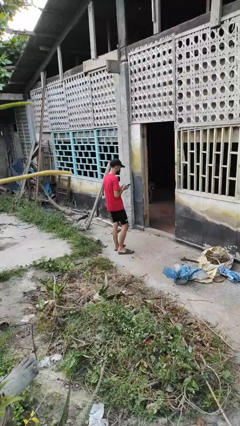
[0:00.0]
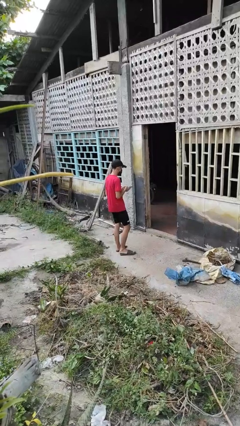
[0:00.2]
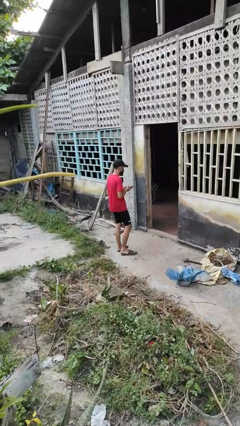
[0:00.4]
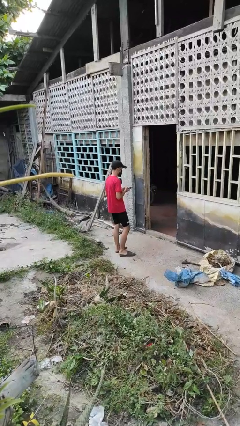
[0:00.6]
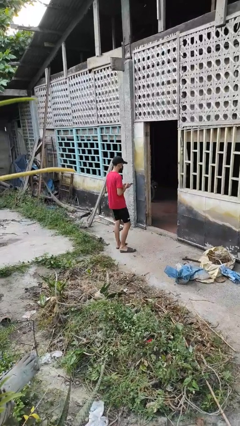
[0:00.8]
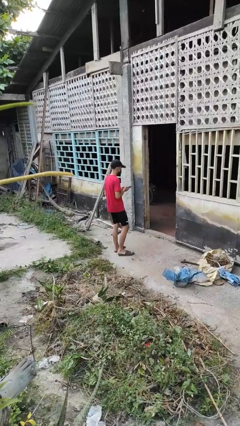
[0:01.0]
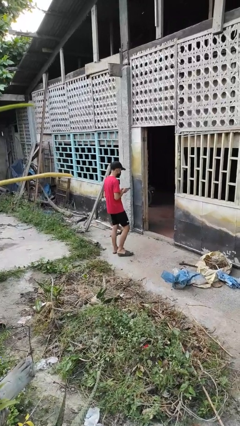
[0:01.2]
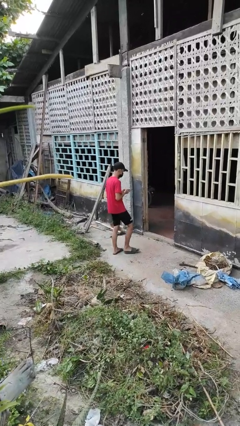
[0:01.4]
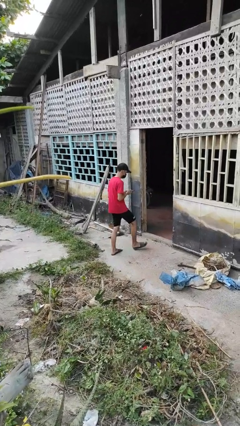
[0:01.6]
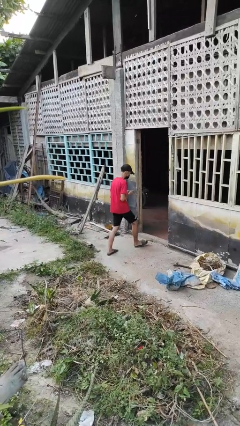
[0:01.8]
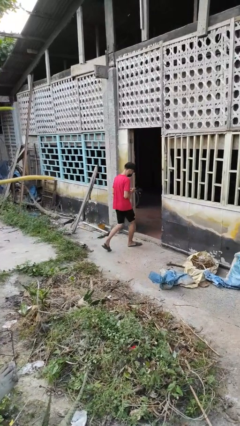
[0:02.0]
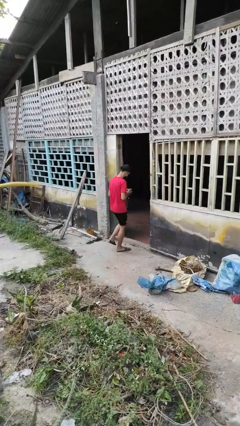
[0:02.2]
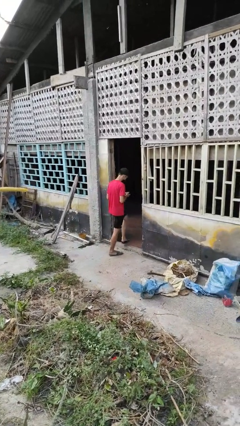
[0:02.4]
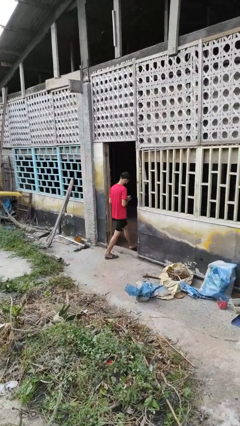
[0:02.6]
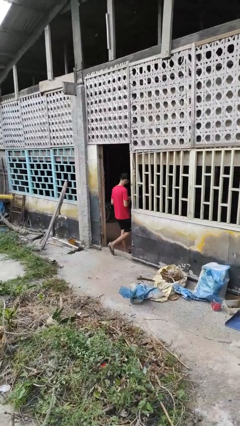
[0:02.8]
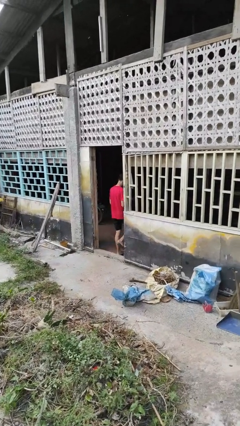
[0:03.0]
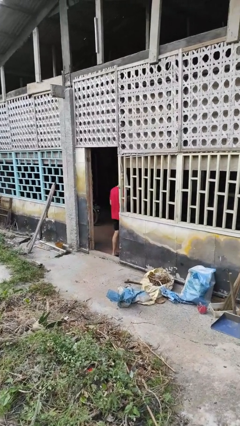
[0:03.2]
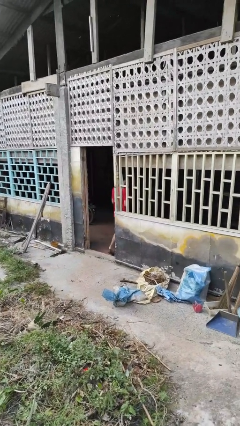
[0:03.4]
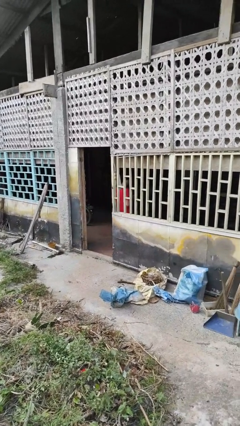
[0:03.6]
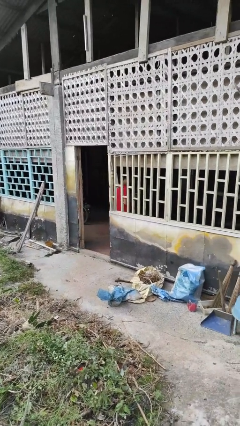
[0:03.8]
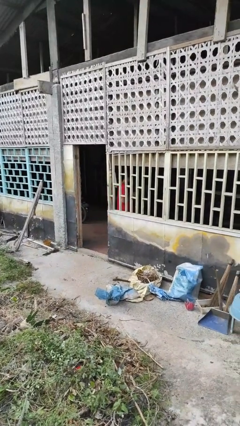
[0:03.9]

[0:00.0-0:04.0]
person enters scene through structure

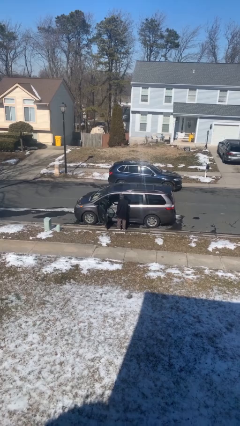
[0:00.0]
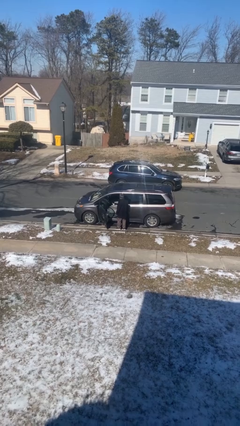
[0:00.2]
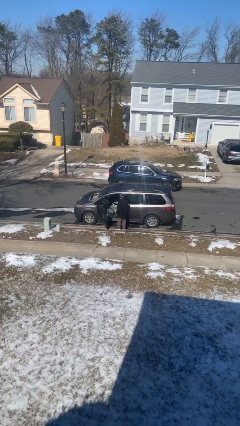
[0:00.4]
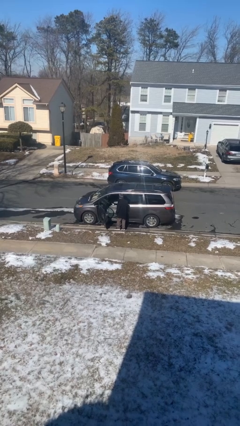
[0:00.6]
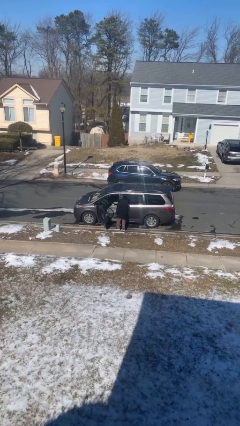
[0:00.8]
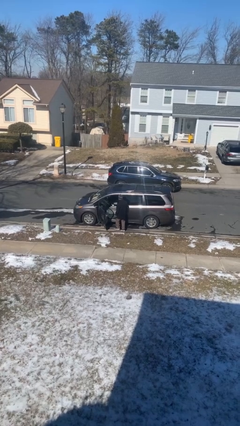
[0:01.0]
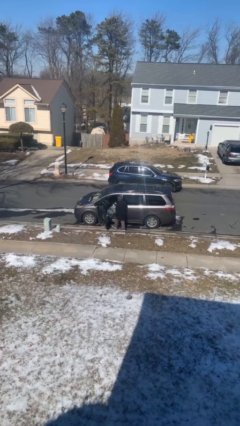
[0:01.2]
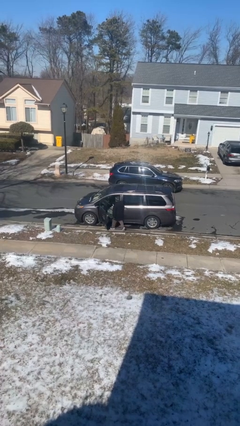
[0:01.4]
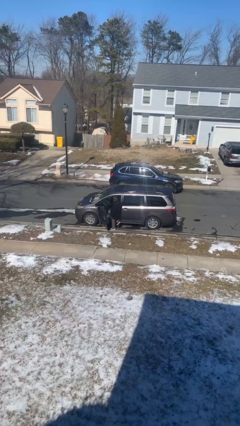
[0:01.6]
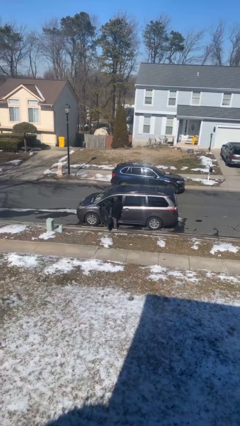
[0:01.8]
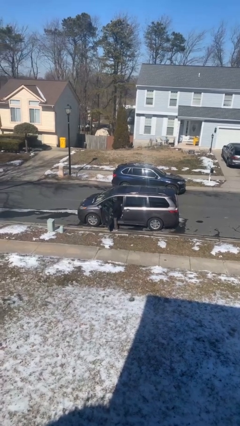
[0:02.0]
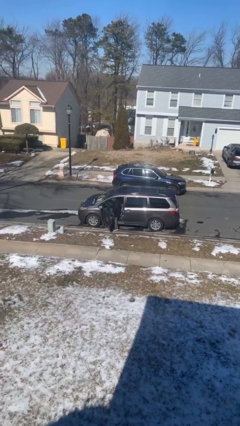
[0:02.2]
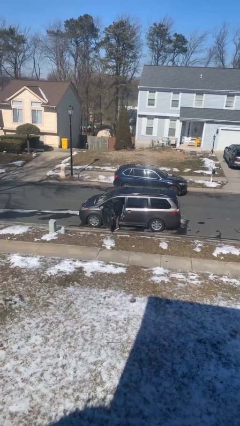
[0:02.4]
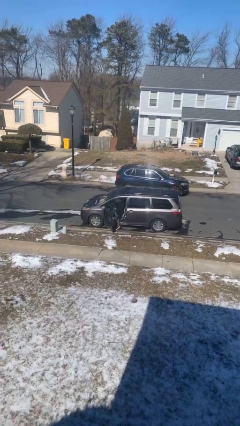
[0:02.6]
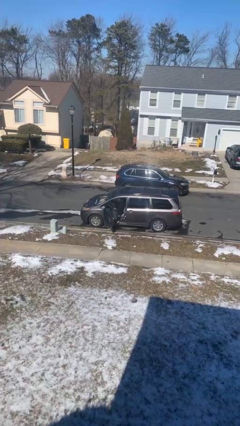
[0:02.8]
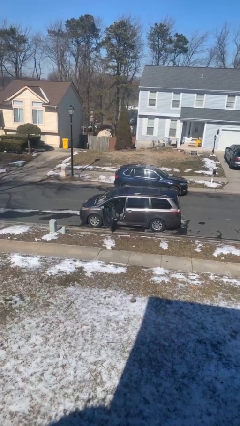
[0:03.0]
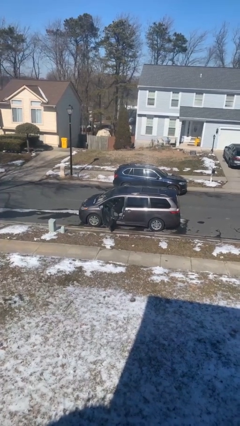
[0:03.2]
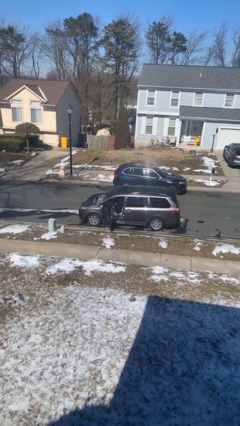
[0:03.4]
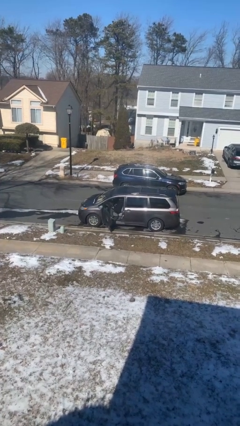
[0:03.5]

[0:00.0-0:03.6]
person enters car

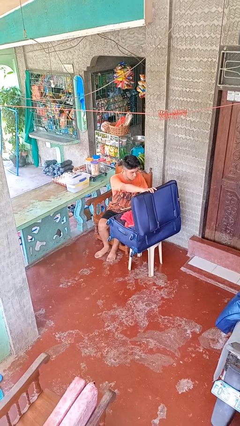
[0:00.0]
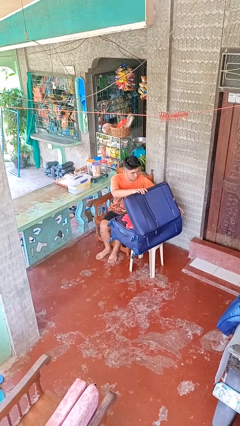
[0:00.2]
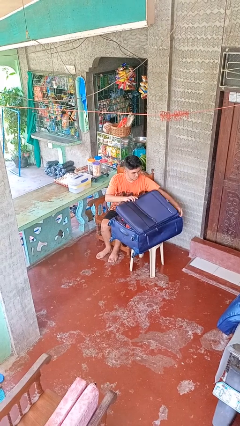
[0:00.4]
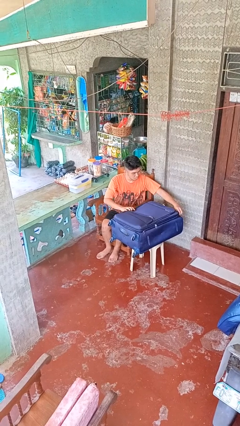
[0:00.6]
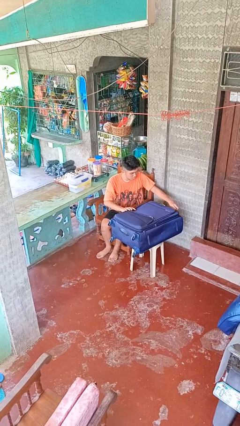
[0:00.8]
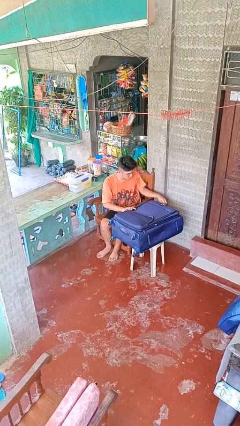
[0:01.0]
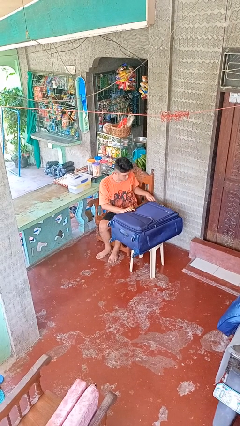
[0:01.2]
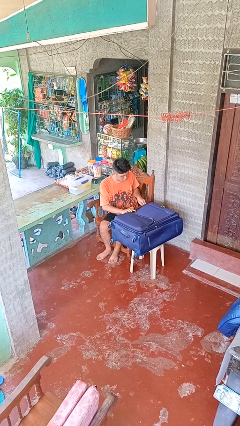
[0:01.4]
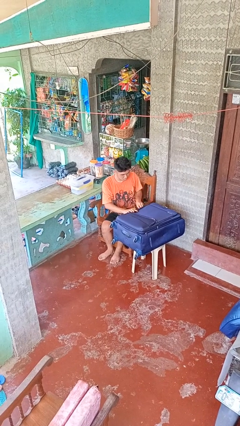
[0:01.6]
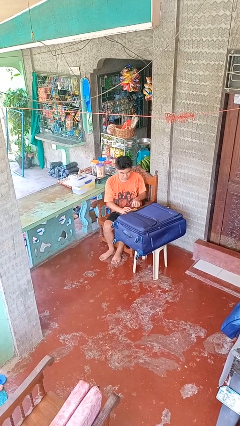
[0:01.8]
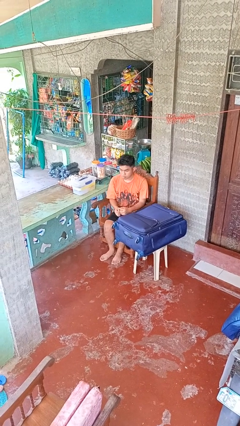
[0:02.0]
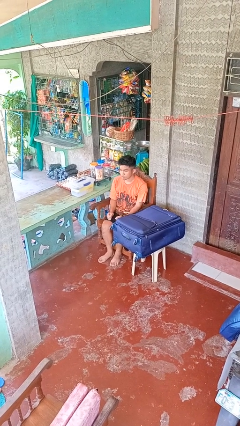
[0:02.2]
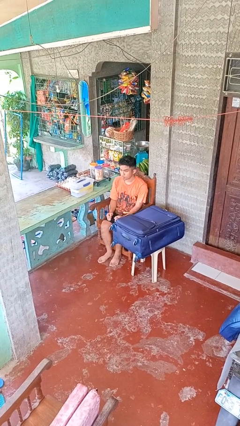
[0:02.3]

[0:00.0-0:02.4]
person closes suitcase

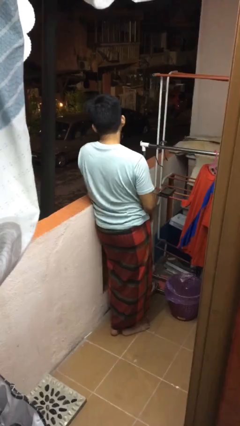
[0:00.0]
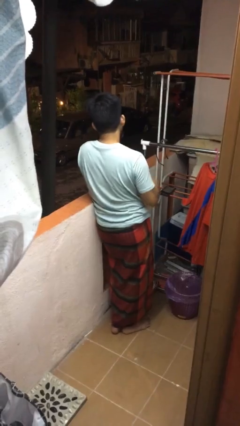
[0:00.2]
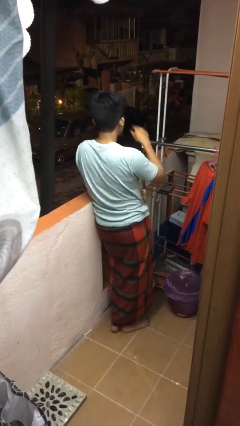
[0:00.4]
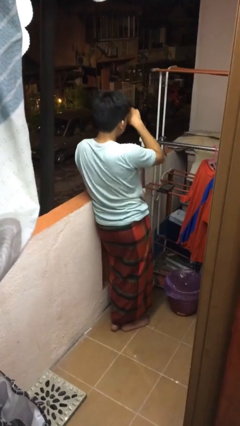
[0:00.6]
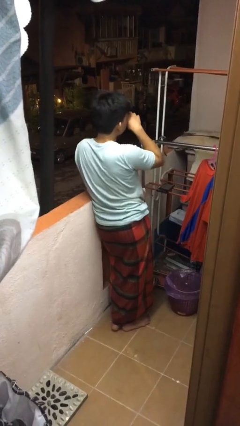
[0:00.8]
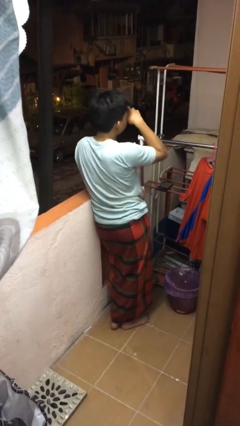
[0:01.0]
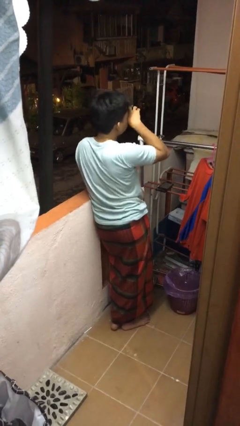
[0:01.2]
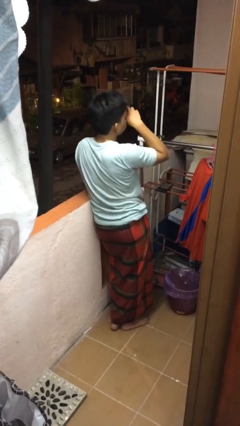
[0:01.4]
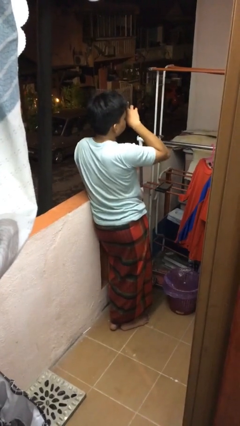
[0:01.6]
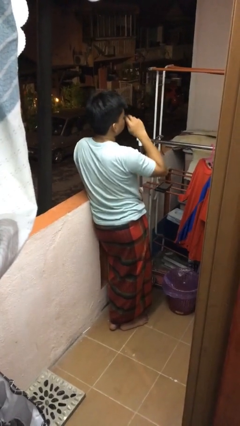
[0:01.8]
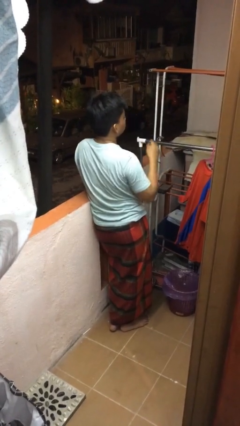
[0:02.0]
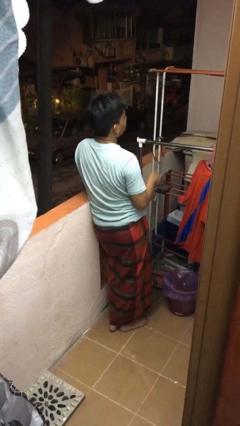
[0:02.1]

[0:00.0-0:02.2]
person rubs eyes

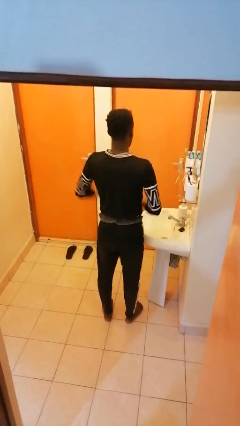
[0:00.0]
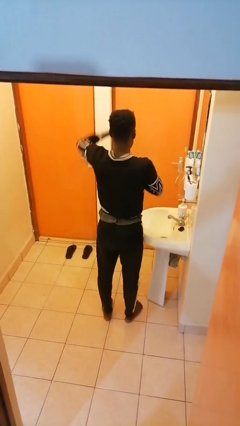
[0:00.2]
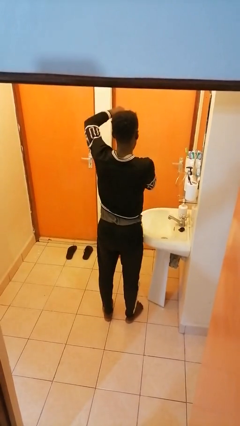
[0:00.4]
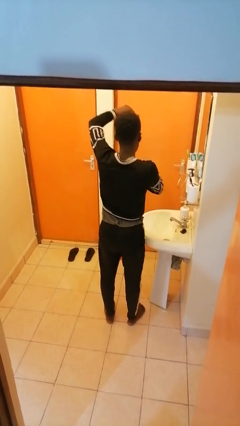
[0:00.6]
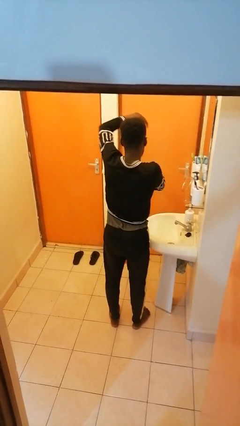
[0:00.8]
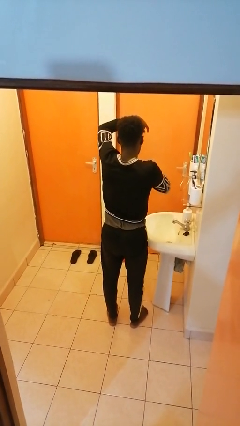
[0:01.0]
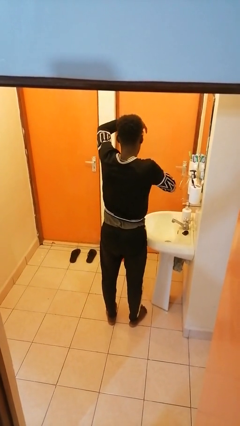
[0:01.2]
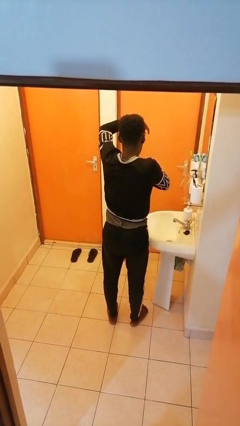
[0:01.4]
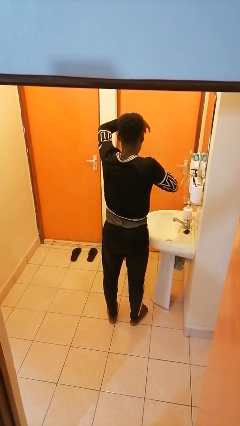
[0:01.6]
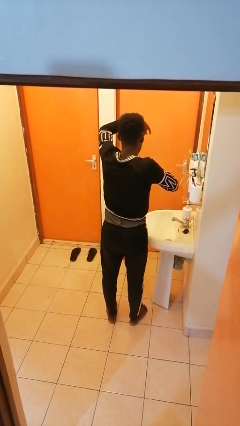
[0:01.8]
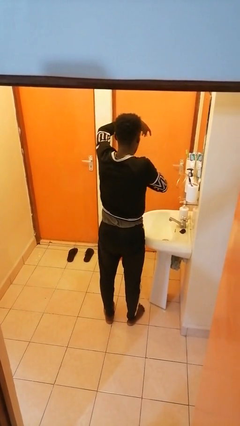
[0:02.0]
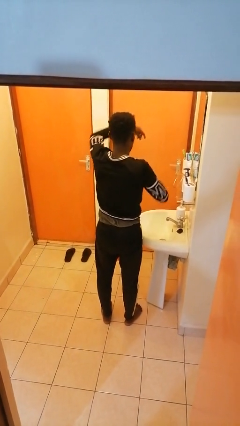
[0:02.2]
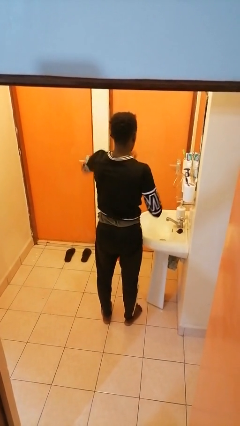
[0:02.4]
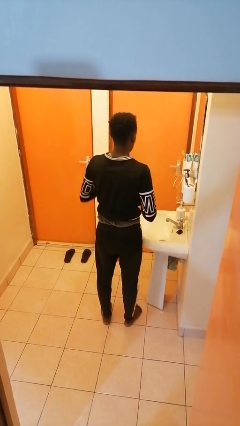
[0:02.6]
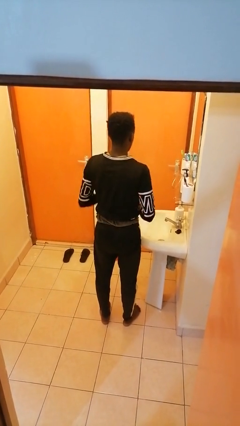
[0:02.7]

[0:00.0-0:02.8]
person applies deodorant

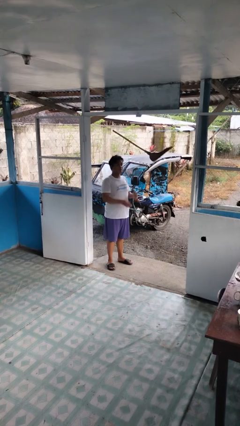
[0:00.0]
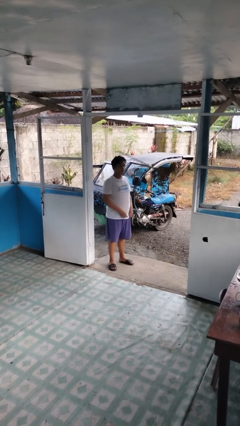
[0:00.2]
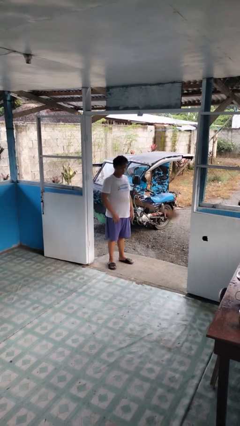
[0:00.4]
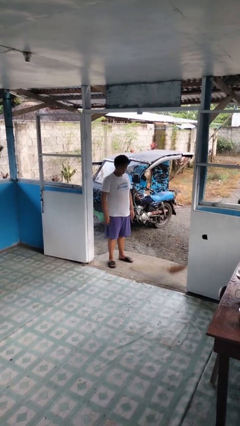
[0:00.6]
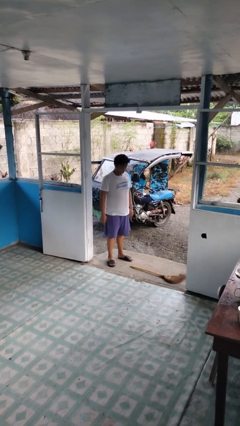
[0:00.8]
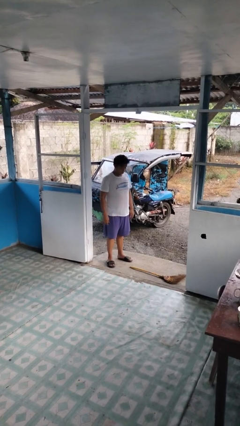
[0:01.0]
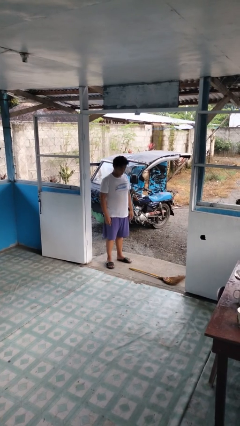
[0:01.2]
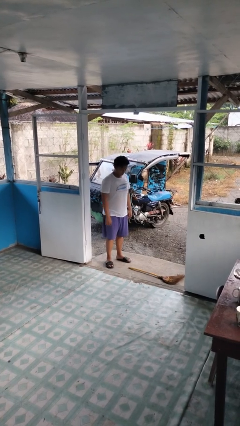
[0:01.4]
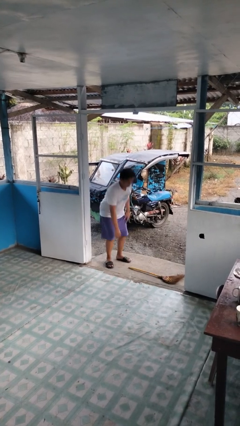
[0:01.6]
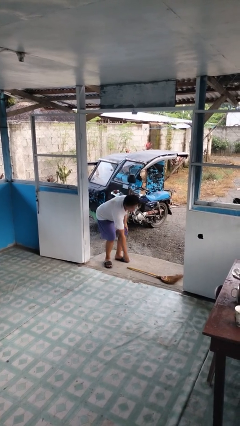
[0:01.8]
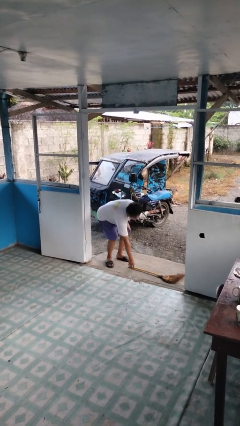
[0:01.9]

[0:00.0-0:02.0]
person throws object into air

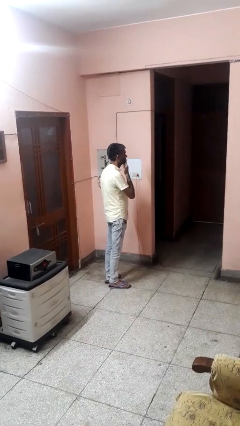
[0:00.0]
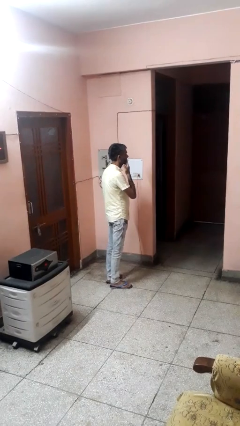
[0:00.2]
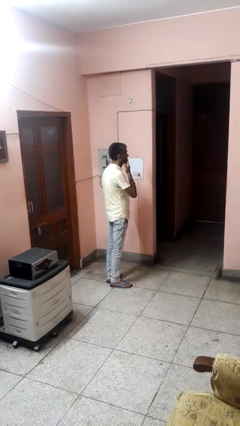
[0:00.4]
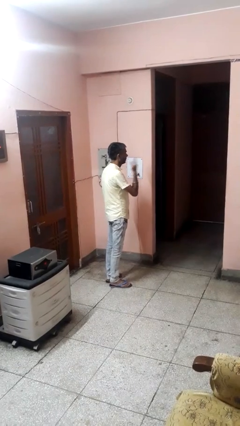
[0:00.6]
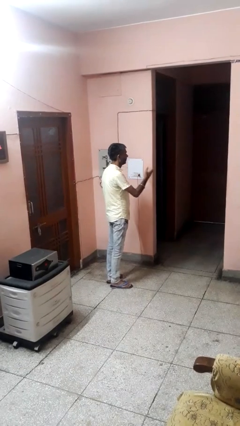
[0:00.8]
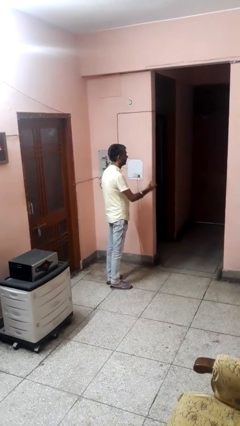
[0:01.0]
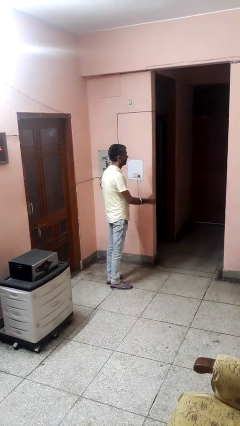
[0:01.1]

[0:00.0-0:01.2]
person gestures blow kiss
